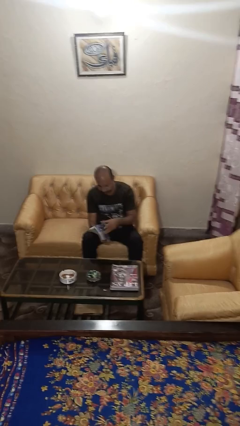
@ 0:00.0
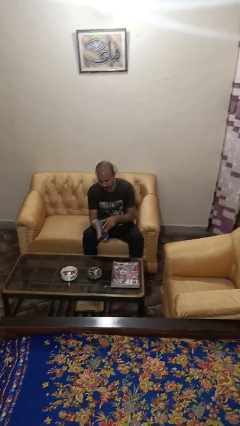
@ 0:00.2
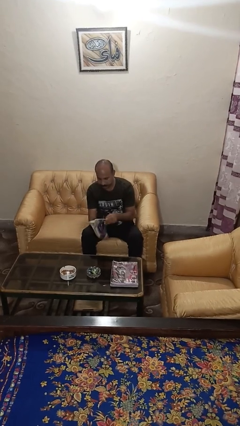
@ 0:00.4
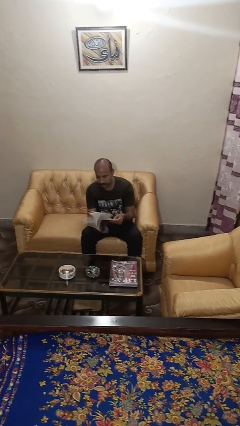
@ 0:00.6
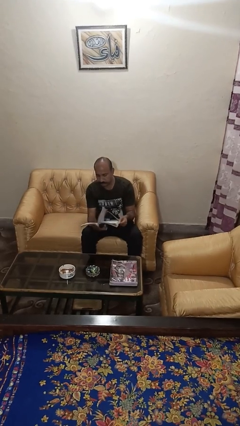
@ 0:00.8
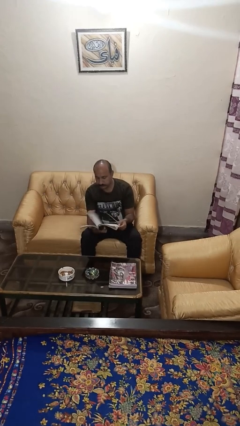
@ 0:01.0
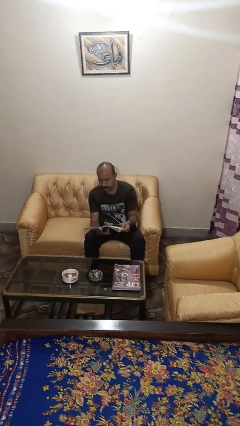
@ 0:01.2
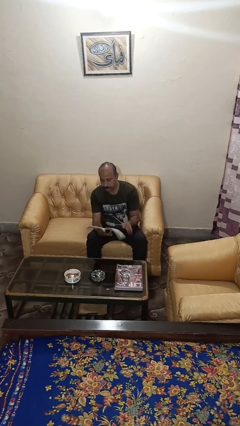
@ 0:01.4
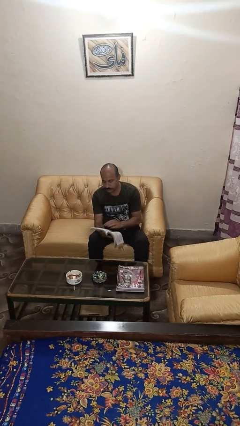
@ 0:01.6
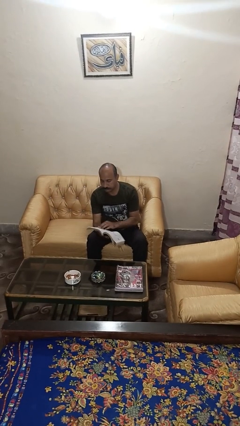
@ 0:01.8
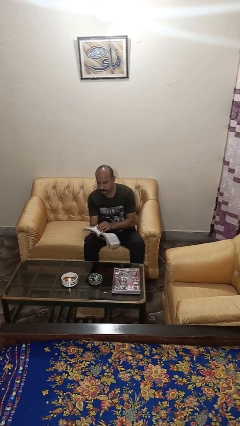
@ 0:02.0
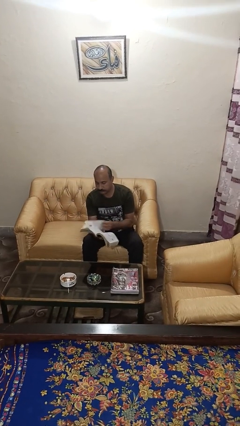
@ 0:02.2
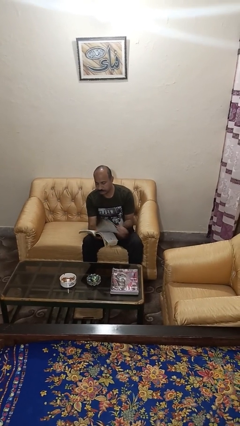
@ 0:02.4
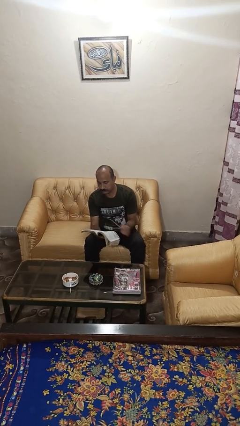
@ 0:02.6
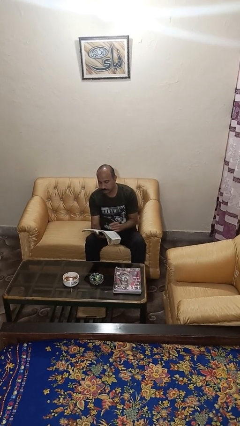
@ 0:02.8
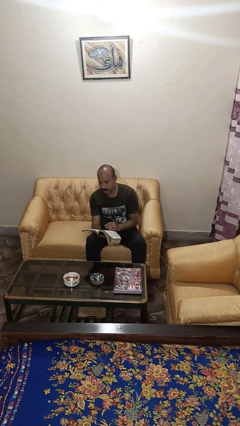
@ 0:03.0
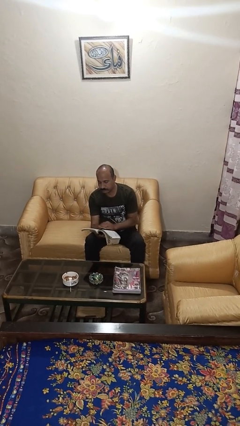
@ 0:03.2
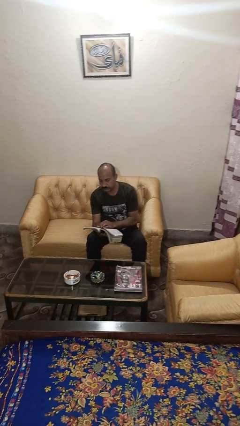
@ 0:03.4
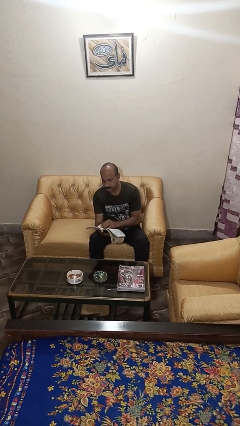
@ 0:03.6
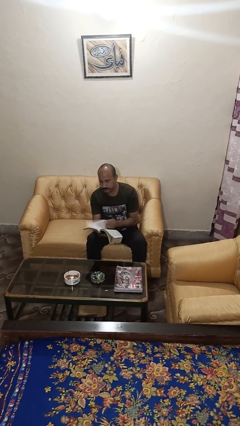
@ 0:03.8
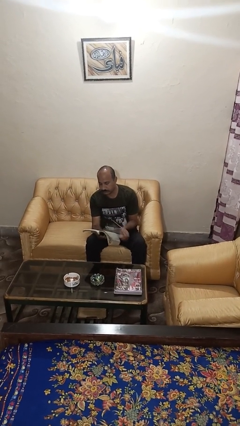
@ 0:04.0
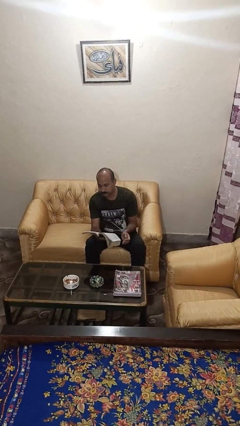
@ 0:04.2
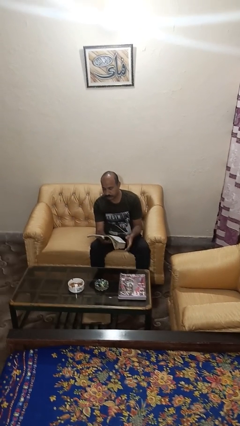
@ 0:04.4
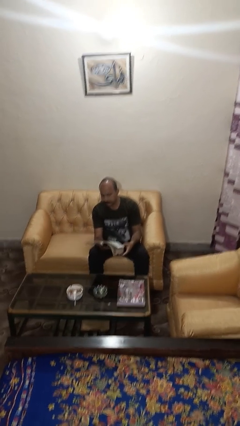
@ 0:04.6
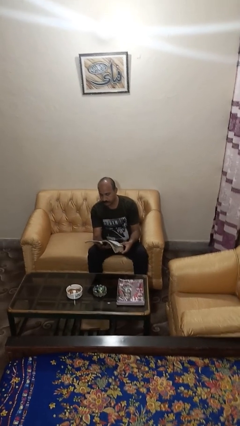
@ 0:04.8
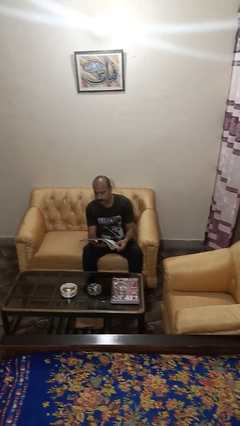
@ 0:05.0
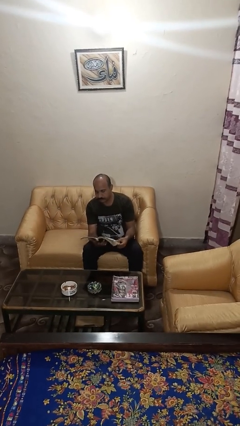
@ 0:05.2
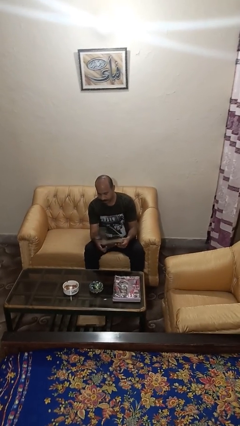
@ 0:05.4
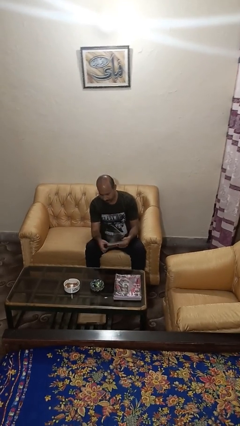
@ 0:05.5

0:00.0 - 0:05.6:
person reads book

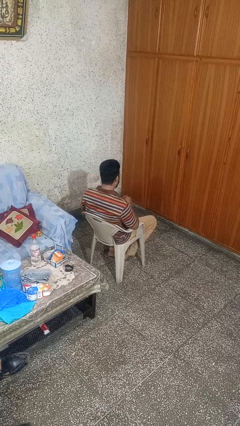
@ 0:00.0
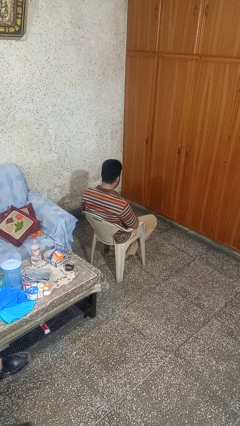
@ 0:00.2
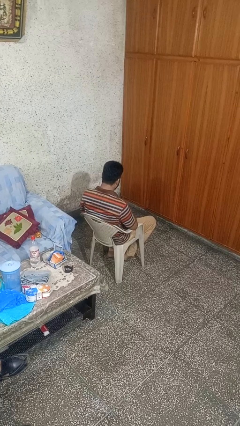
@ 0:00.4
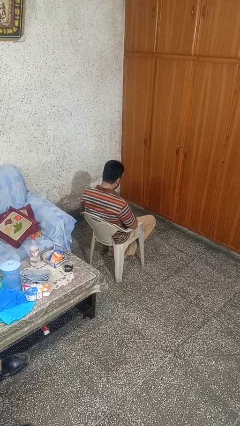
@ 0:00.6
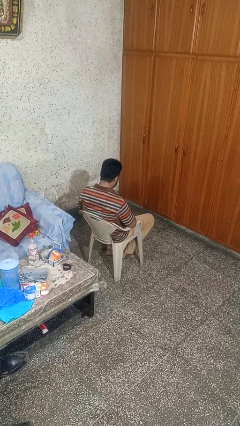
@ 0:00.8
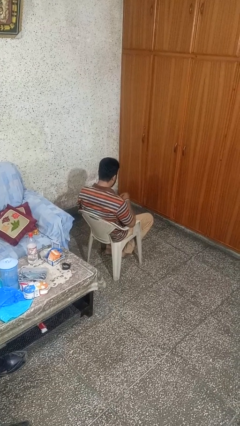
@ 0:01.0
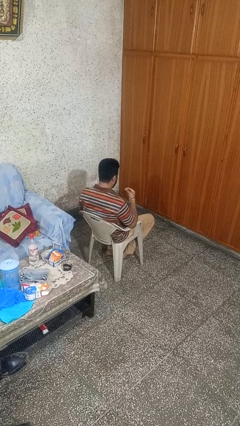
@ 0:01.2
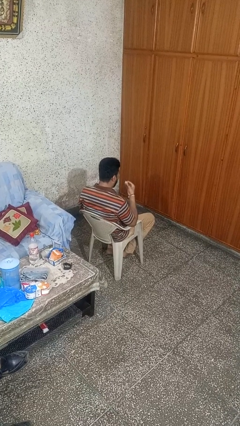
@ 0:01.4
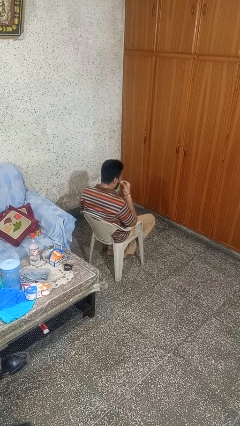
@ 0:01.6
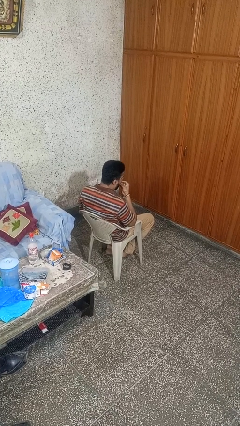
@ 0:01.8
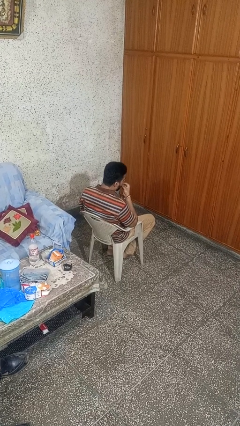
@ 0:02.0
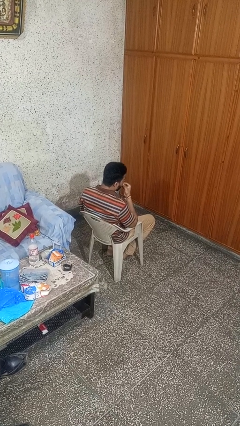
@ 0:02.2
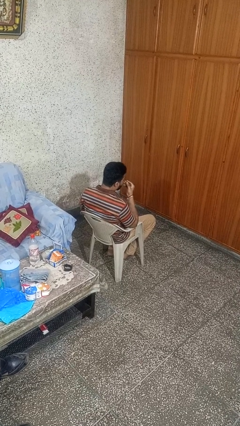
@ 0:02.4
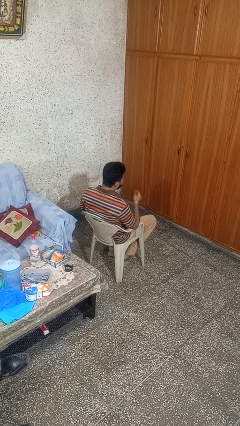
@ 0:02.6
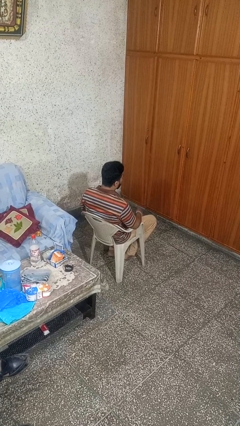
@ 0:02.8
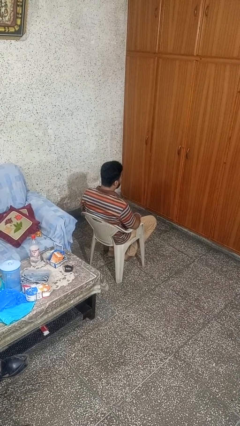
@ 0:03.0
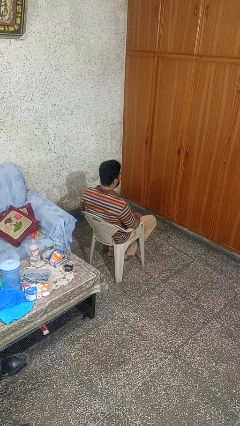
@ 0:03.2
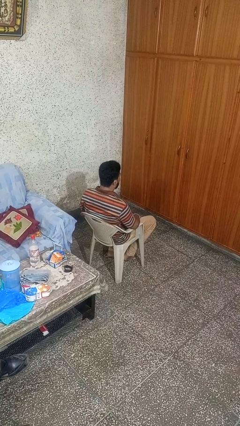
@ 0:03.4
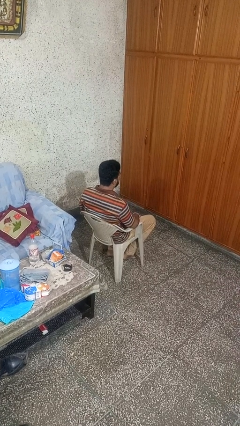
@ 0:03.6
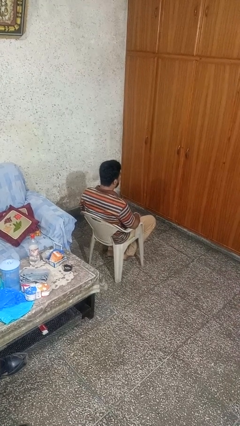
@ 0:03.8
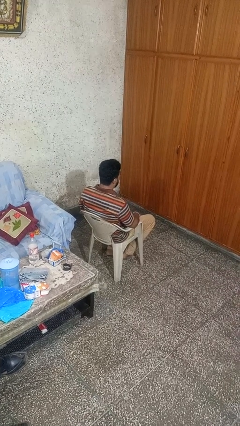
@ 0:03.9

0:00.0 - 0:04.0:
person eats snack from bag

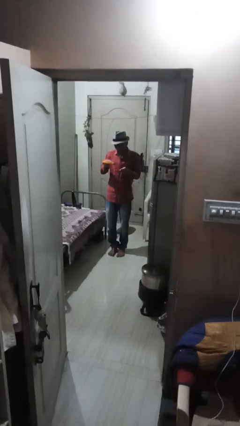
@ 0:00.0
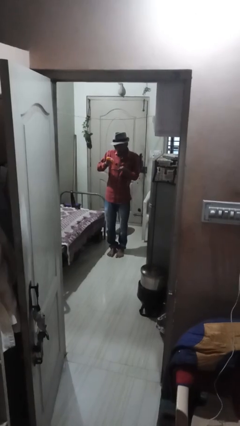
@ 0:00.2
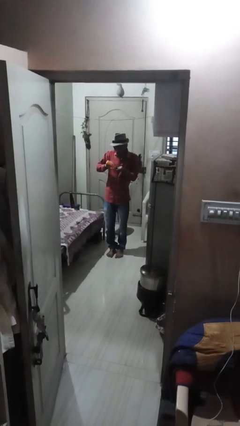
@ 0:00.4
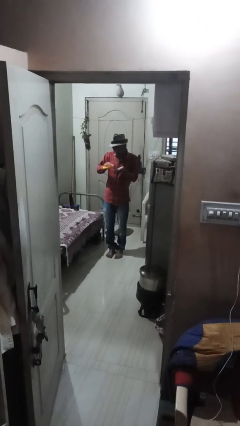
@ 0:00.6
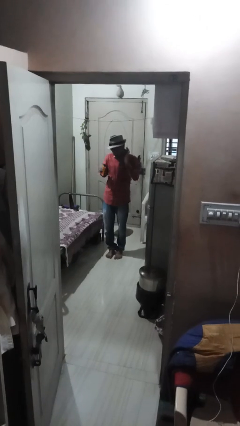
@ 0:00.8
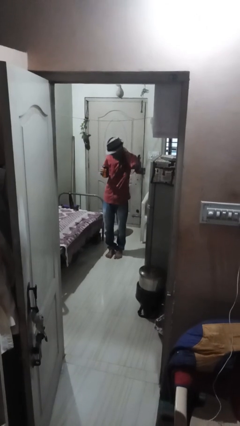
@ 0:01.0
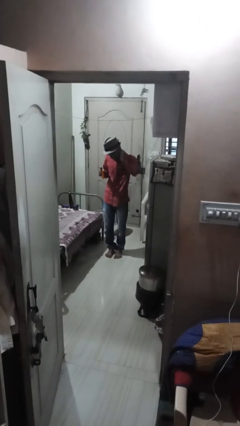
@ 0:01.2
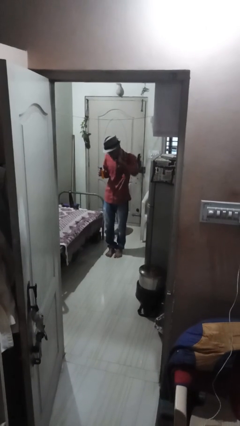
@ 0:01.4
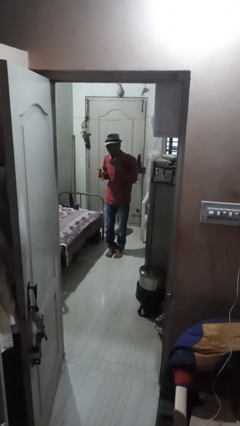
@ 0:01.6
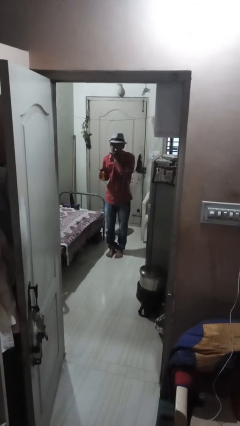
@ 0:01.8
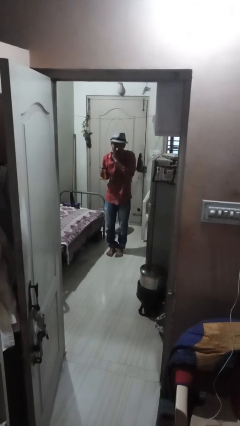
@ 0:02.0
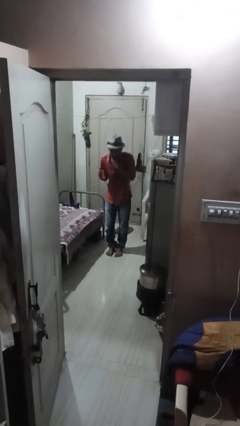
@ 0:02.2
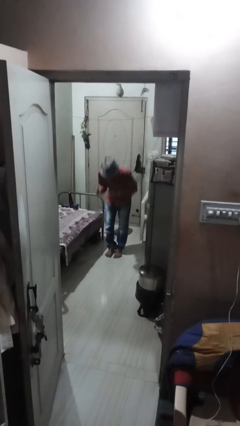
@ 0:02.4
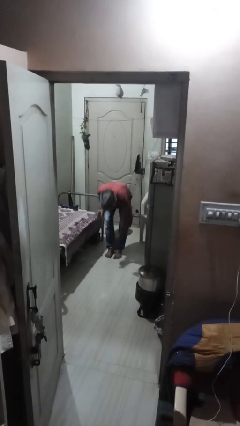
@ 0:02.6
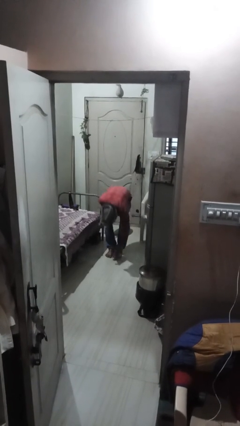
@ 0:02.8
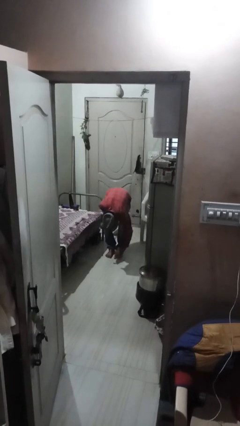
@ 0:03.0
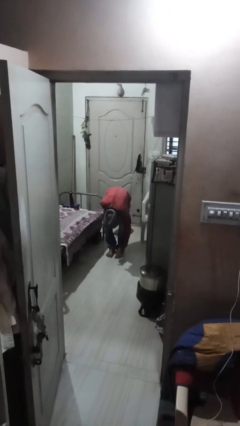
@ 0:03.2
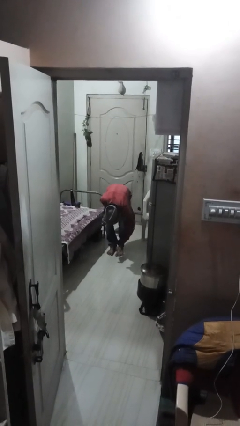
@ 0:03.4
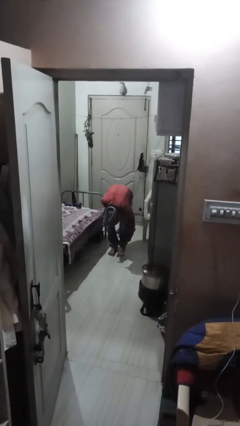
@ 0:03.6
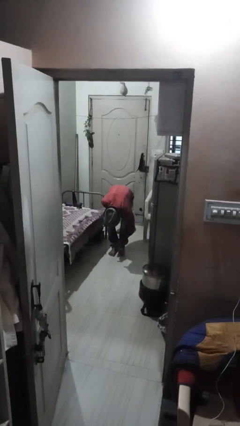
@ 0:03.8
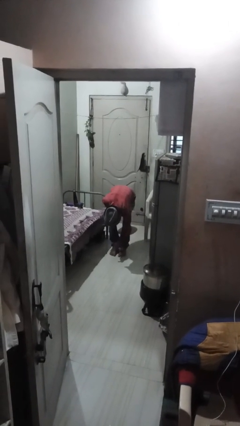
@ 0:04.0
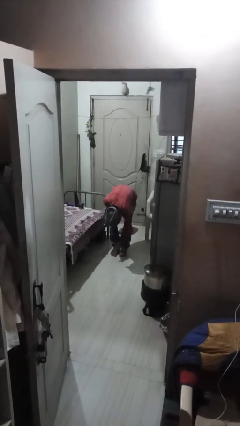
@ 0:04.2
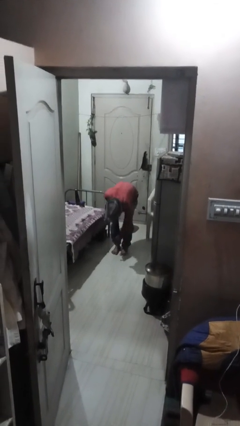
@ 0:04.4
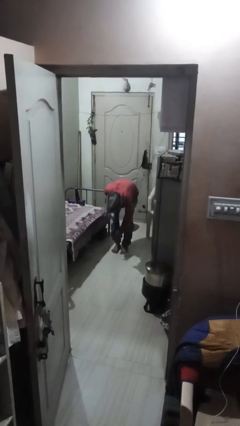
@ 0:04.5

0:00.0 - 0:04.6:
person applies sunscreen

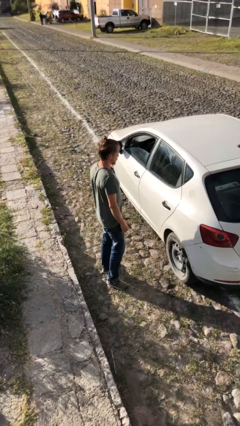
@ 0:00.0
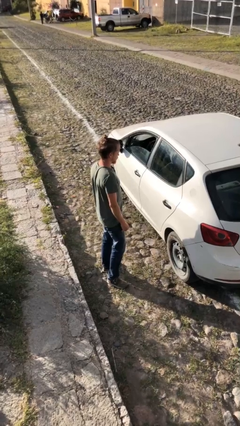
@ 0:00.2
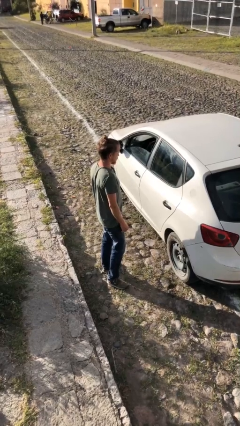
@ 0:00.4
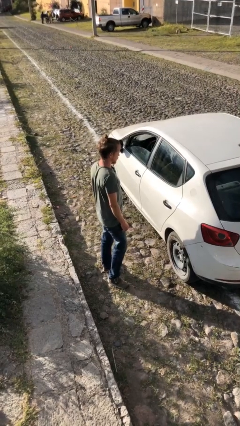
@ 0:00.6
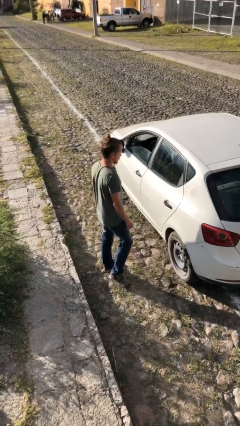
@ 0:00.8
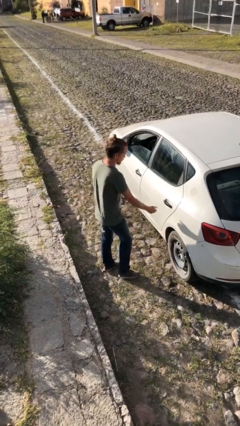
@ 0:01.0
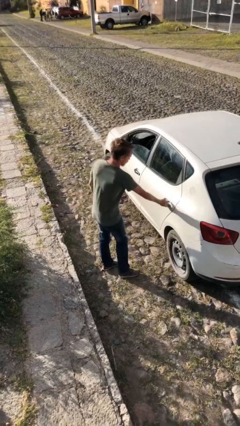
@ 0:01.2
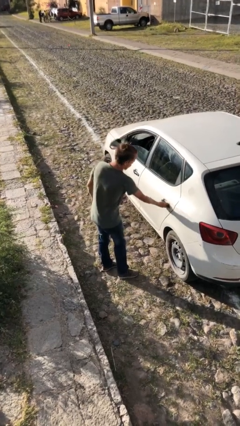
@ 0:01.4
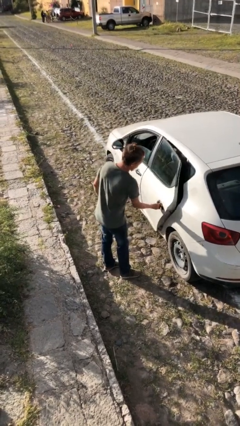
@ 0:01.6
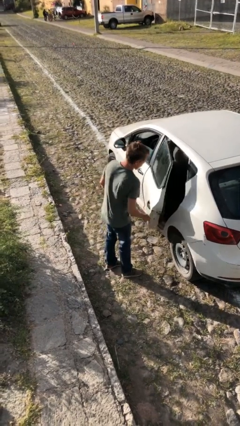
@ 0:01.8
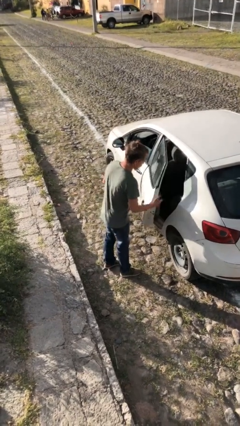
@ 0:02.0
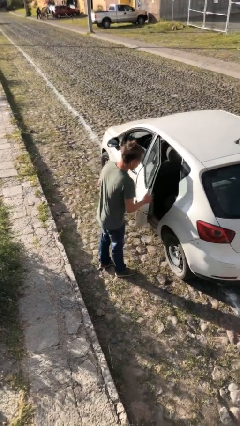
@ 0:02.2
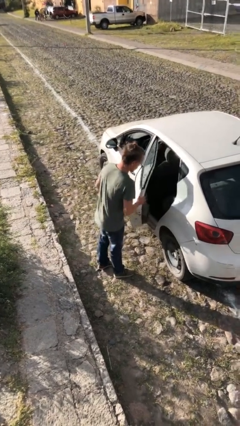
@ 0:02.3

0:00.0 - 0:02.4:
person opens car door

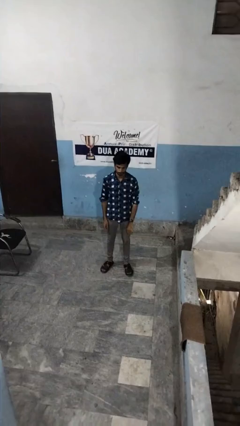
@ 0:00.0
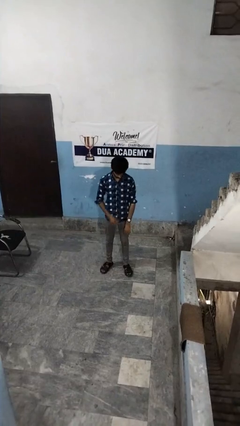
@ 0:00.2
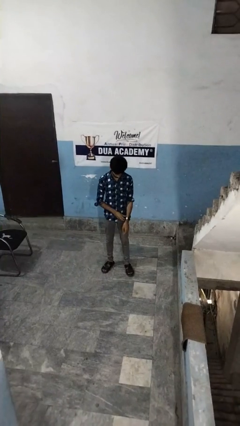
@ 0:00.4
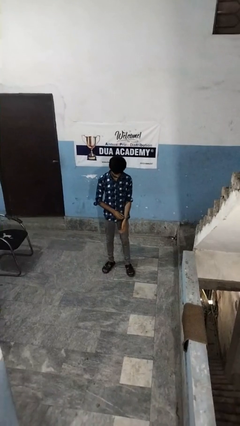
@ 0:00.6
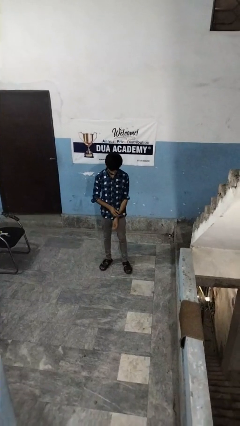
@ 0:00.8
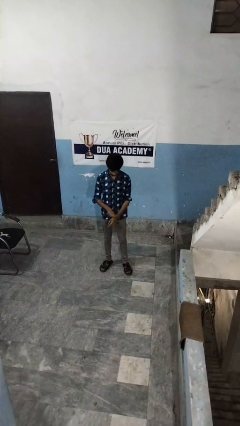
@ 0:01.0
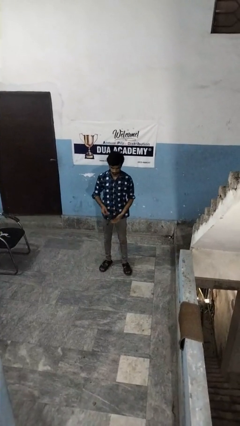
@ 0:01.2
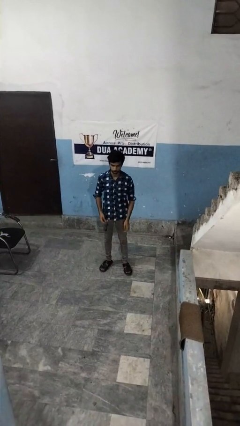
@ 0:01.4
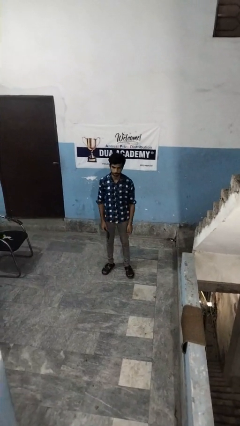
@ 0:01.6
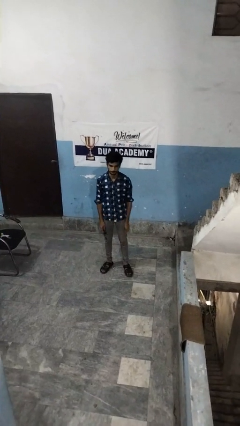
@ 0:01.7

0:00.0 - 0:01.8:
person takes off wristwatch
